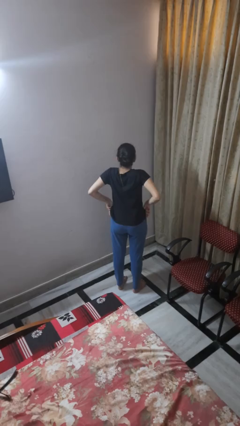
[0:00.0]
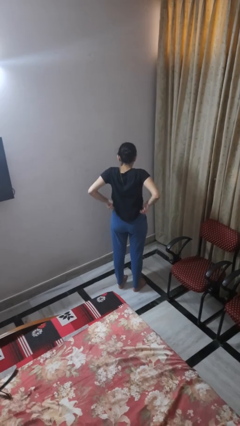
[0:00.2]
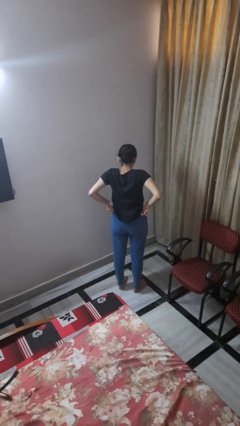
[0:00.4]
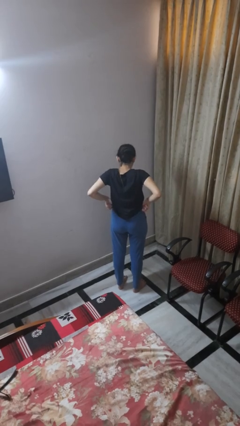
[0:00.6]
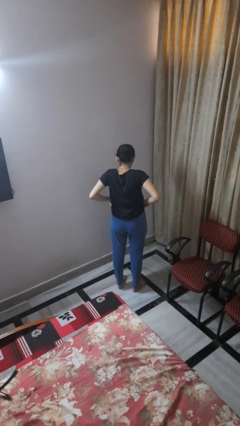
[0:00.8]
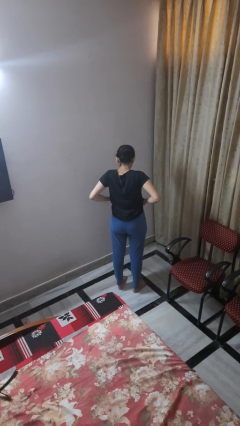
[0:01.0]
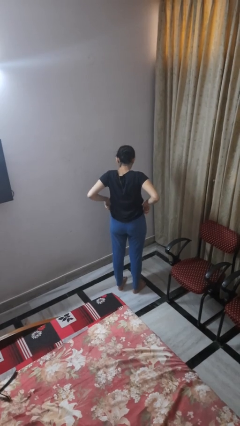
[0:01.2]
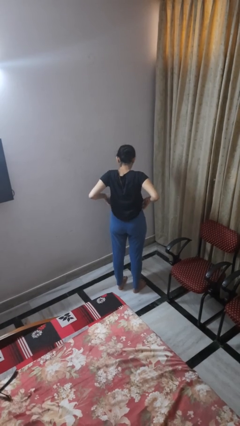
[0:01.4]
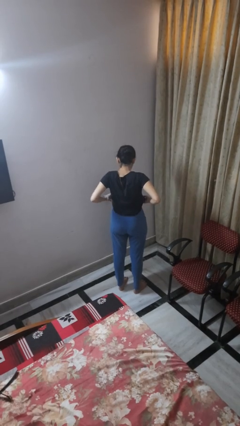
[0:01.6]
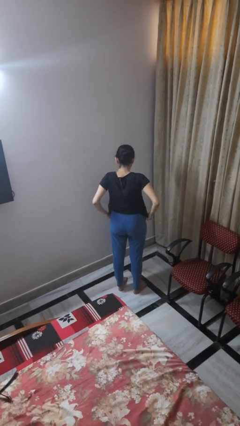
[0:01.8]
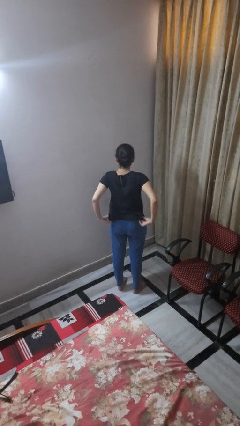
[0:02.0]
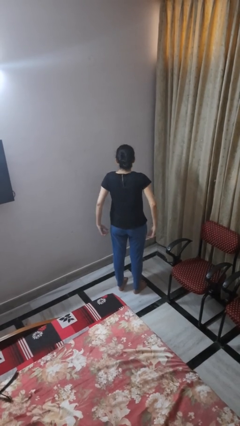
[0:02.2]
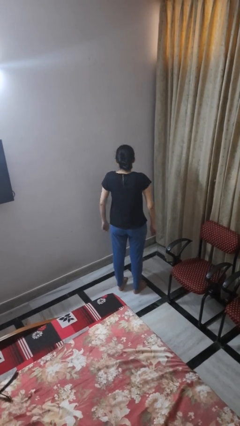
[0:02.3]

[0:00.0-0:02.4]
person hikes up pants

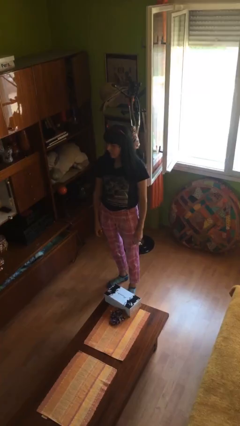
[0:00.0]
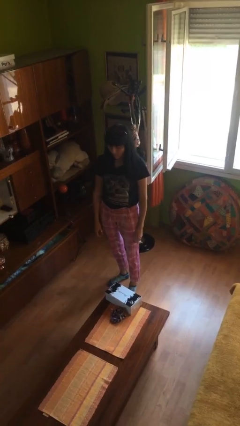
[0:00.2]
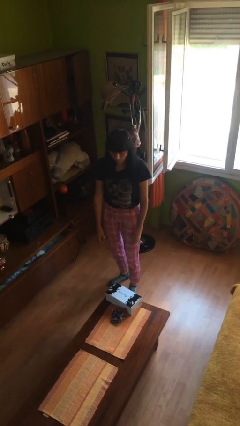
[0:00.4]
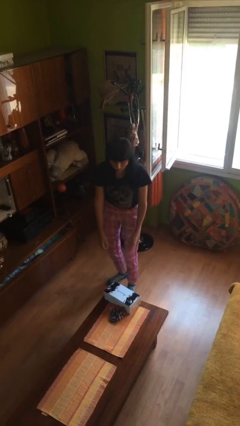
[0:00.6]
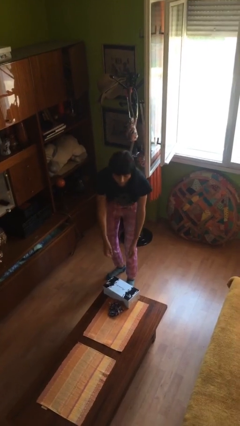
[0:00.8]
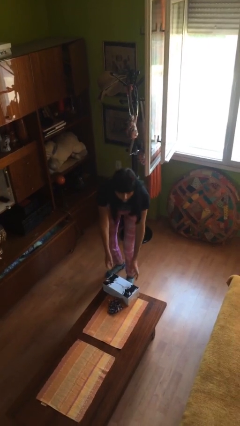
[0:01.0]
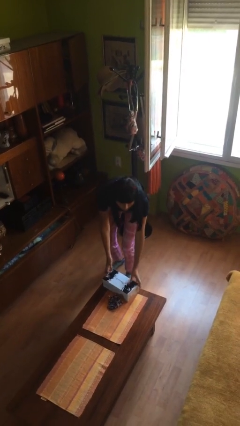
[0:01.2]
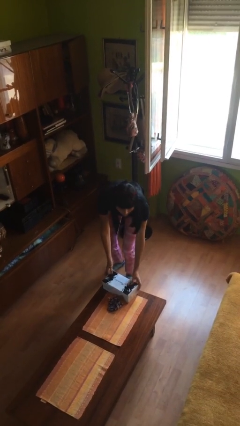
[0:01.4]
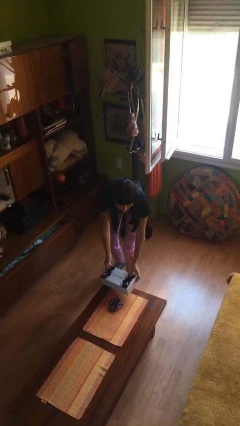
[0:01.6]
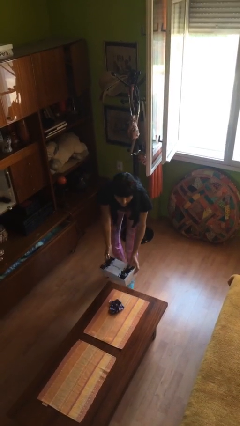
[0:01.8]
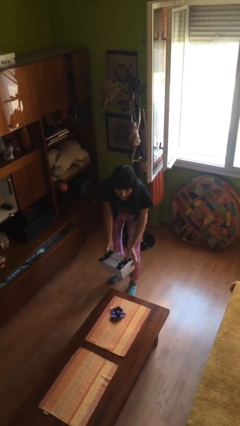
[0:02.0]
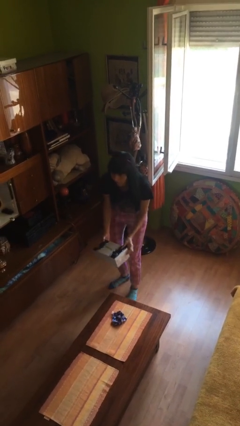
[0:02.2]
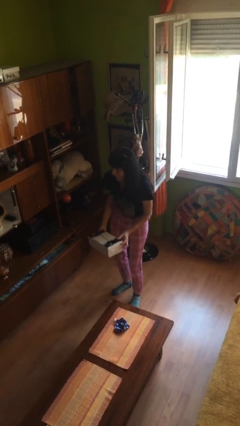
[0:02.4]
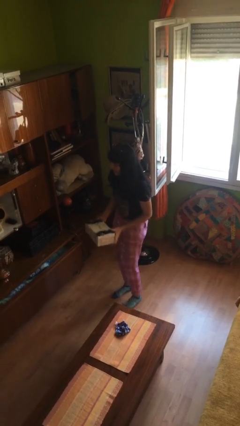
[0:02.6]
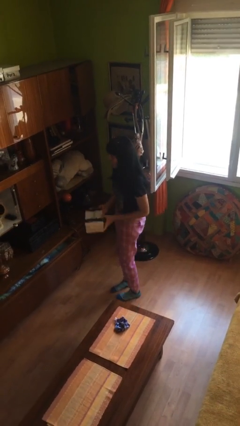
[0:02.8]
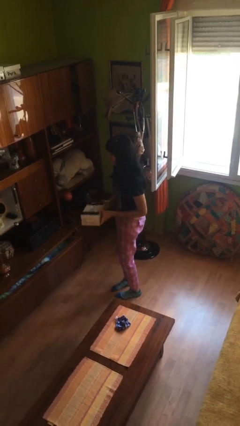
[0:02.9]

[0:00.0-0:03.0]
person picks up object from table

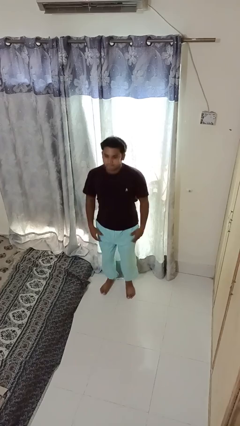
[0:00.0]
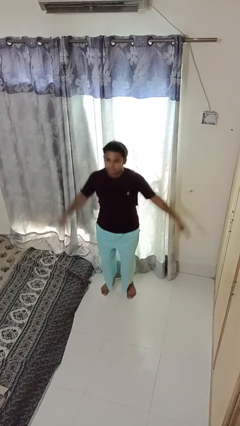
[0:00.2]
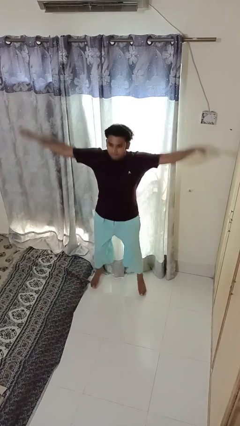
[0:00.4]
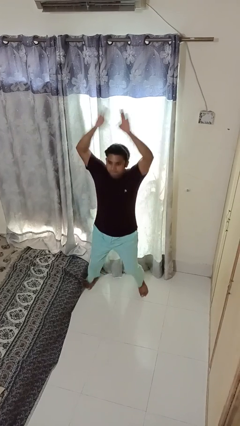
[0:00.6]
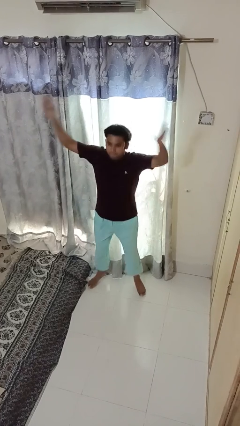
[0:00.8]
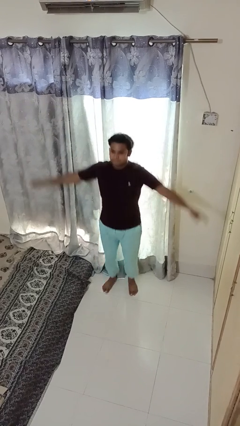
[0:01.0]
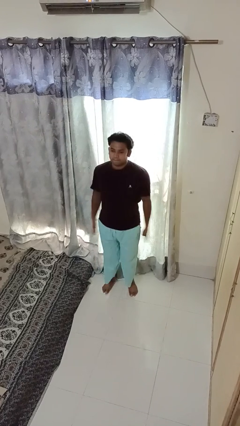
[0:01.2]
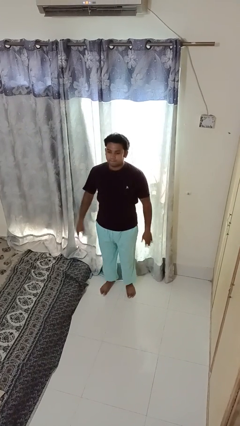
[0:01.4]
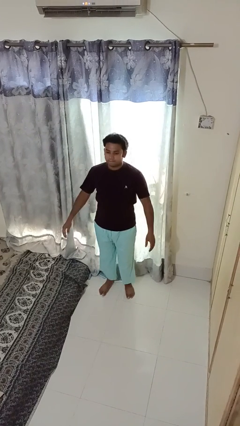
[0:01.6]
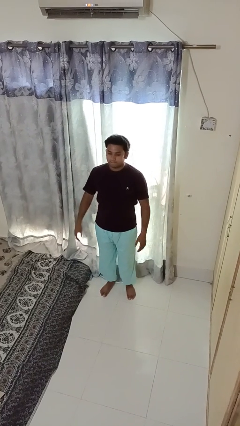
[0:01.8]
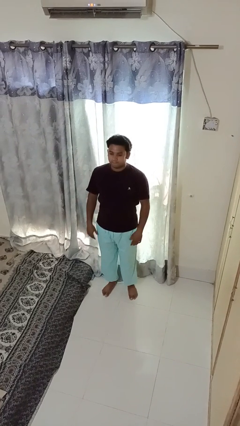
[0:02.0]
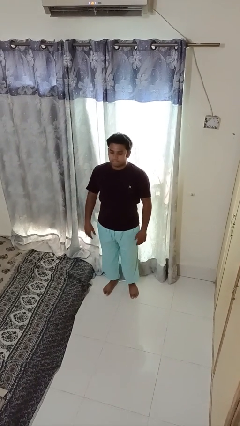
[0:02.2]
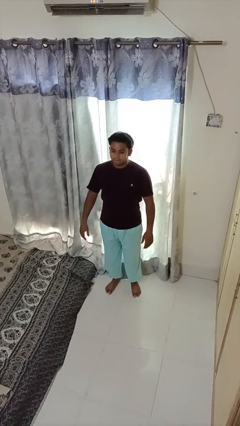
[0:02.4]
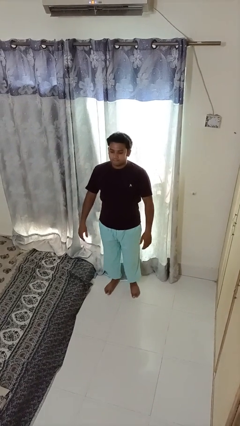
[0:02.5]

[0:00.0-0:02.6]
person exercises with jumping jacks

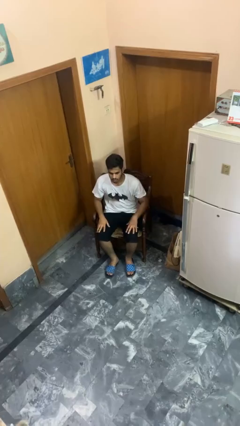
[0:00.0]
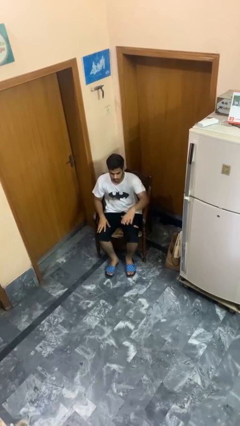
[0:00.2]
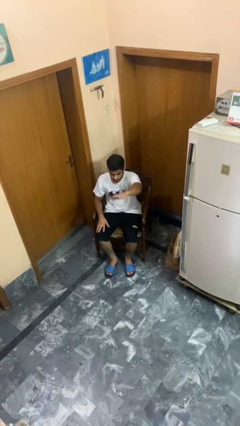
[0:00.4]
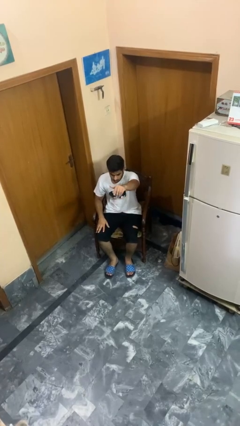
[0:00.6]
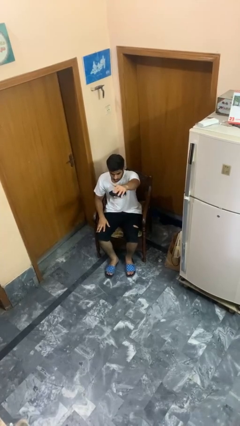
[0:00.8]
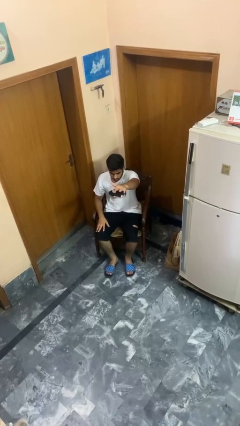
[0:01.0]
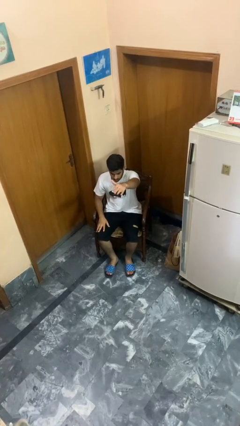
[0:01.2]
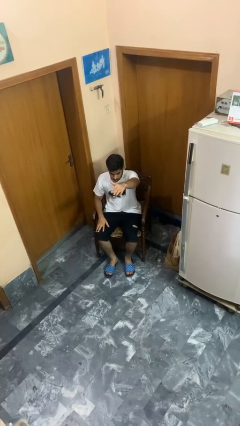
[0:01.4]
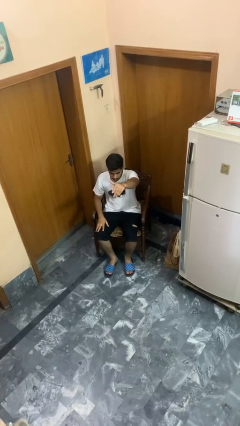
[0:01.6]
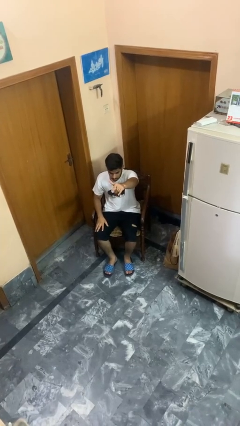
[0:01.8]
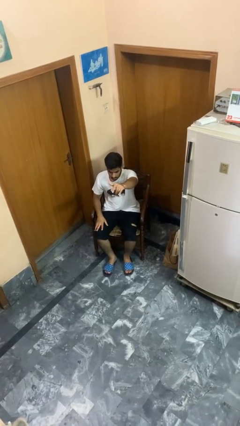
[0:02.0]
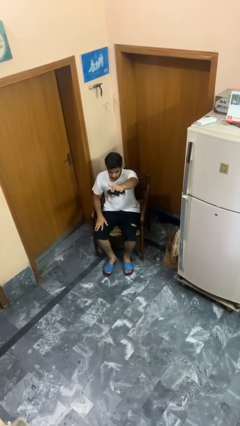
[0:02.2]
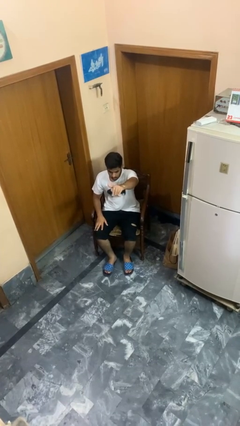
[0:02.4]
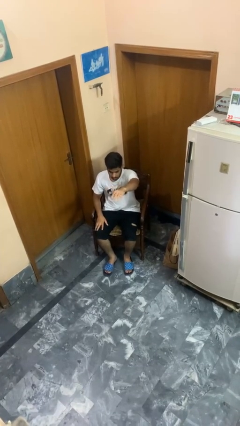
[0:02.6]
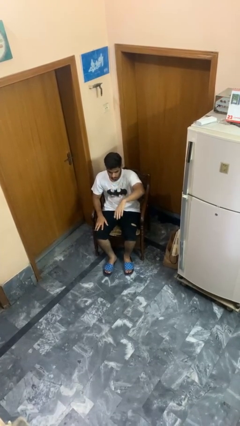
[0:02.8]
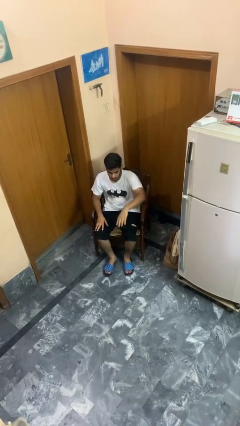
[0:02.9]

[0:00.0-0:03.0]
person gestures come here

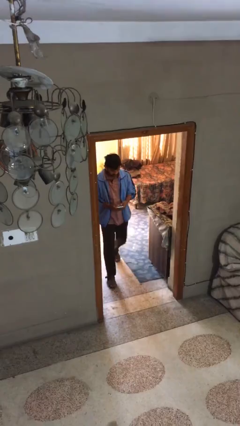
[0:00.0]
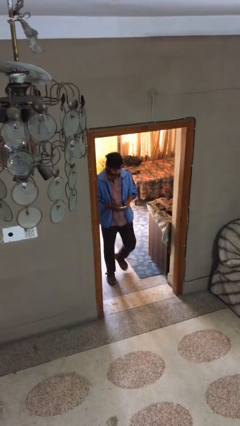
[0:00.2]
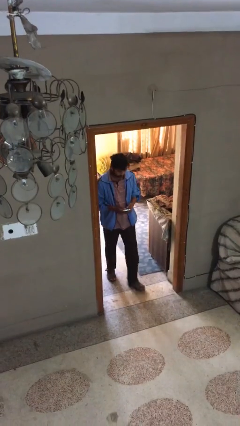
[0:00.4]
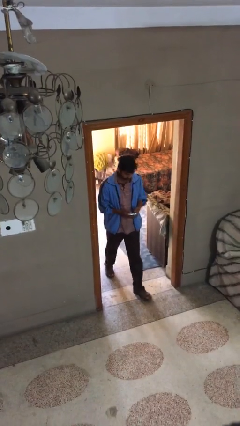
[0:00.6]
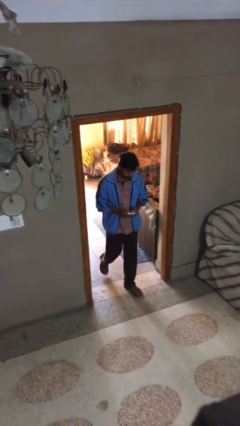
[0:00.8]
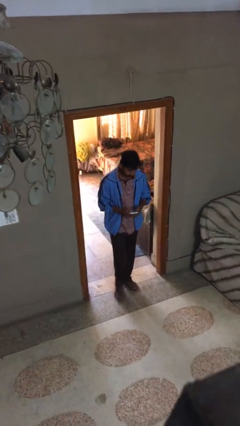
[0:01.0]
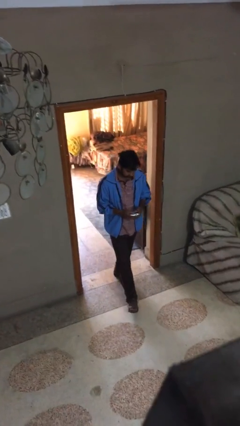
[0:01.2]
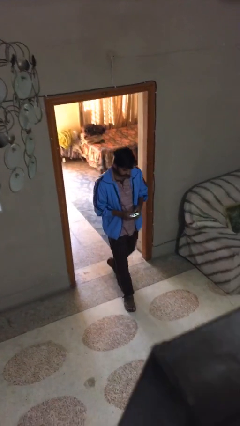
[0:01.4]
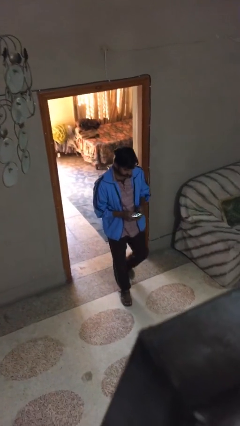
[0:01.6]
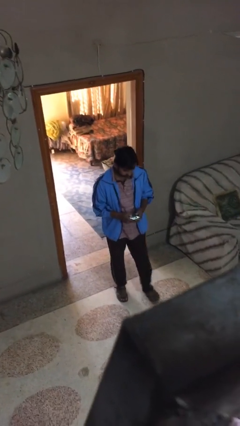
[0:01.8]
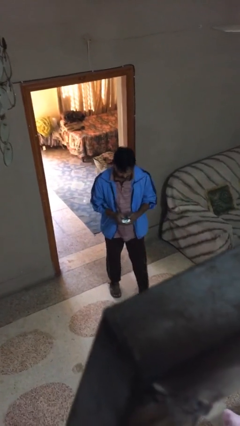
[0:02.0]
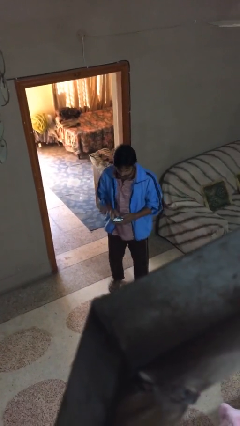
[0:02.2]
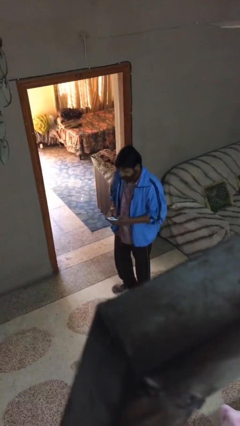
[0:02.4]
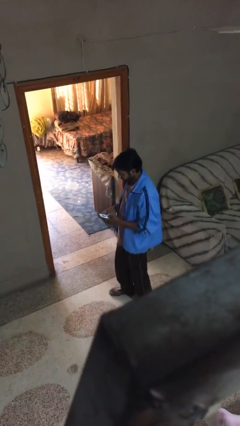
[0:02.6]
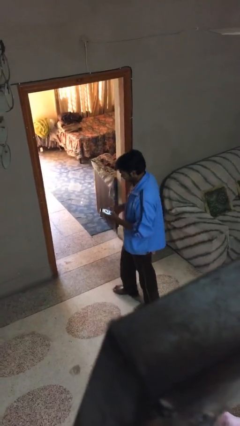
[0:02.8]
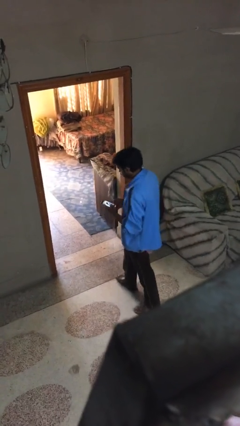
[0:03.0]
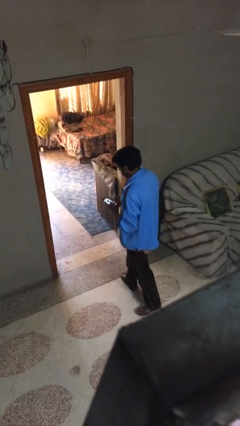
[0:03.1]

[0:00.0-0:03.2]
person enters scene through structure

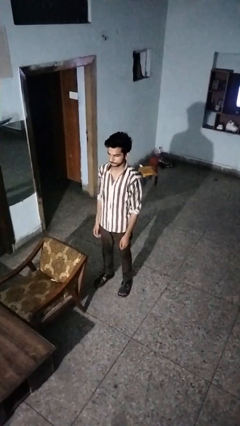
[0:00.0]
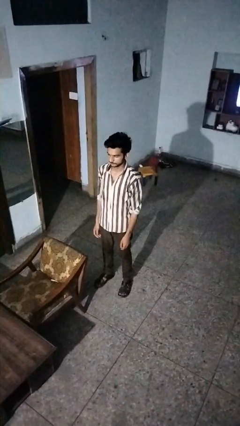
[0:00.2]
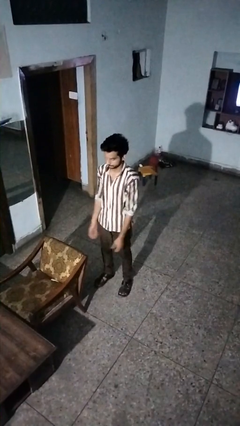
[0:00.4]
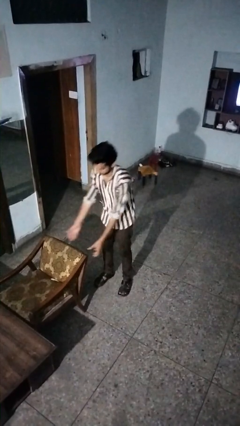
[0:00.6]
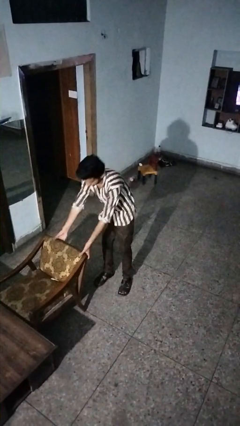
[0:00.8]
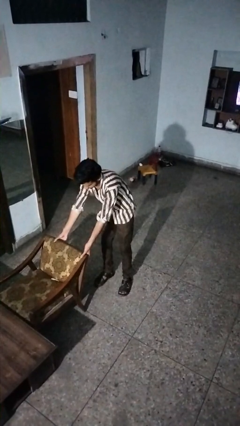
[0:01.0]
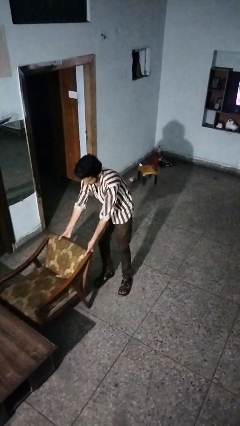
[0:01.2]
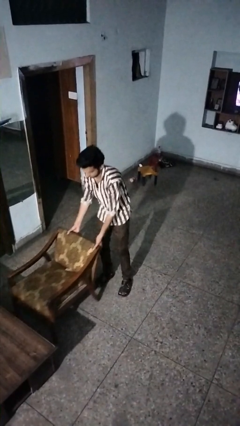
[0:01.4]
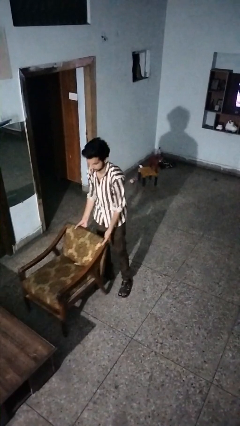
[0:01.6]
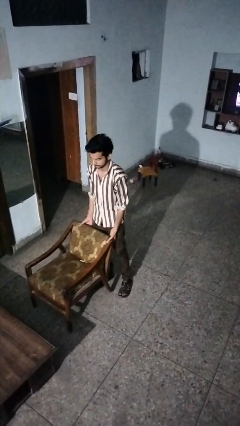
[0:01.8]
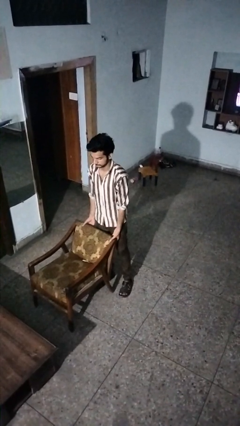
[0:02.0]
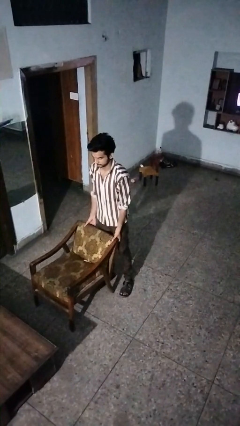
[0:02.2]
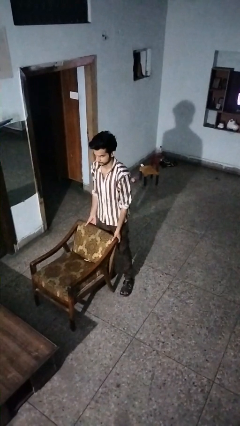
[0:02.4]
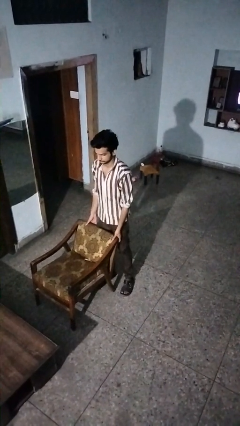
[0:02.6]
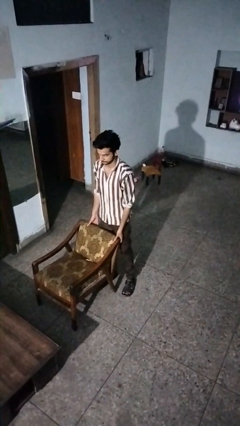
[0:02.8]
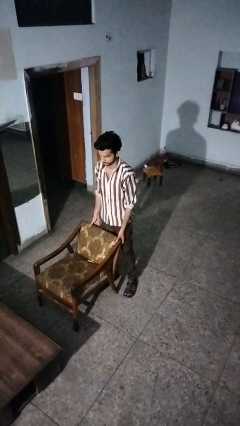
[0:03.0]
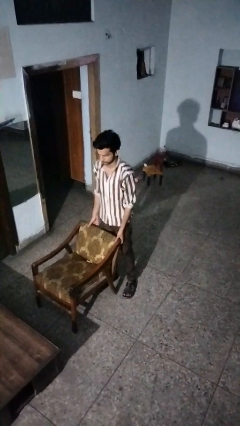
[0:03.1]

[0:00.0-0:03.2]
person pulls out chair
